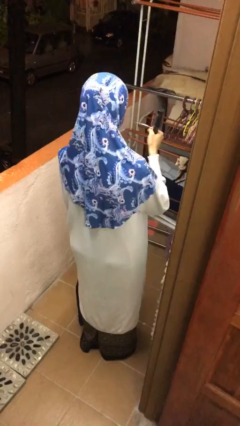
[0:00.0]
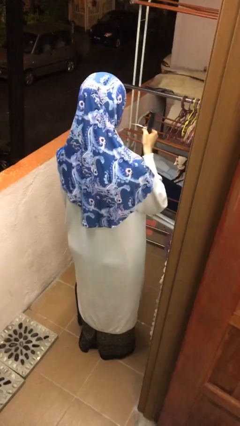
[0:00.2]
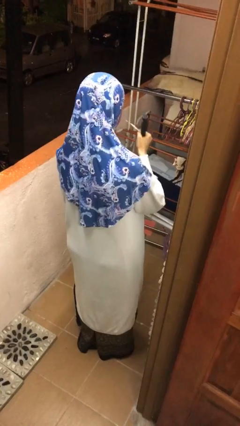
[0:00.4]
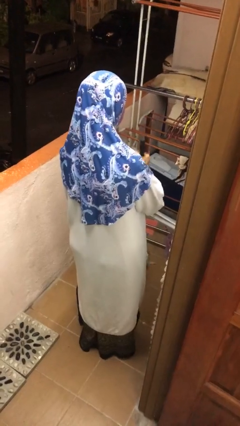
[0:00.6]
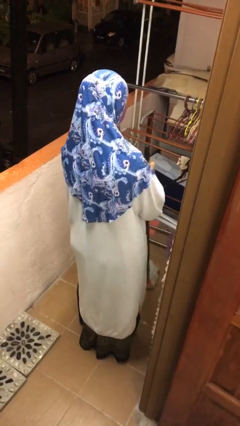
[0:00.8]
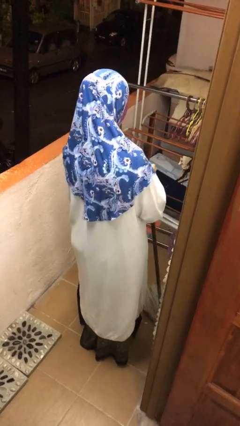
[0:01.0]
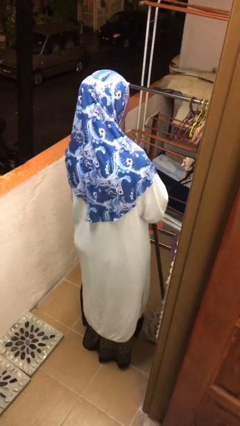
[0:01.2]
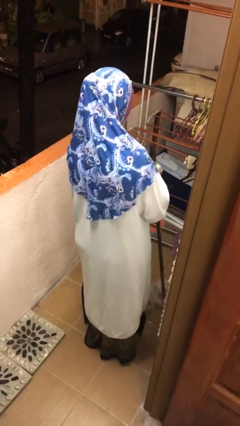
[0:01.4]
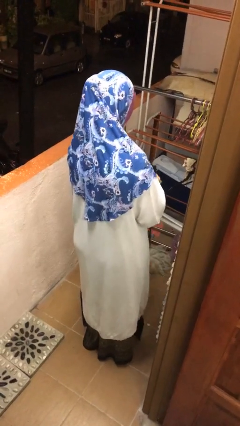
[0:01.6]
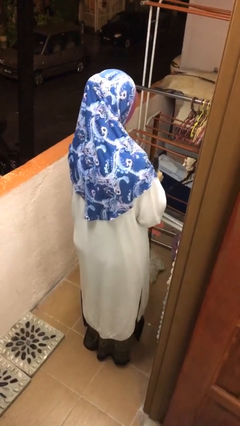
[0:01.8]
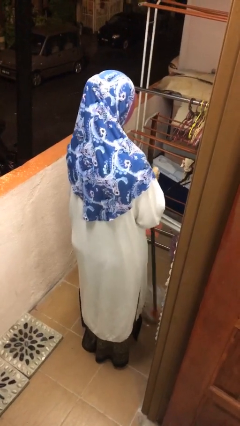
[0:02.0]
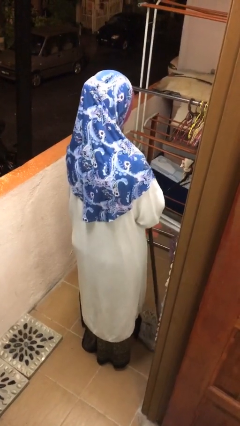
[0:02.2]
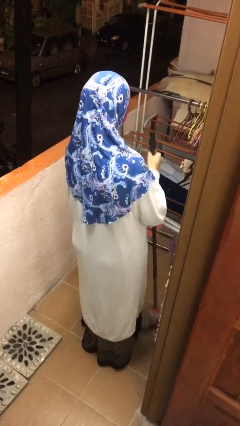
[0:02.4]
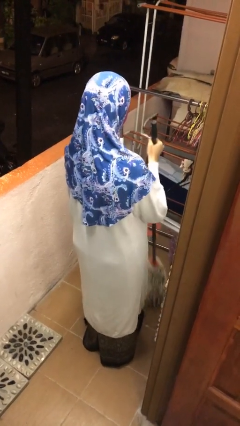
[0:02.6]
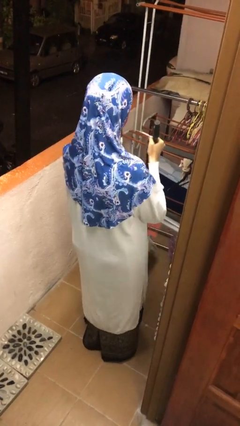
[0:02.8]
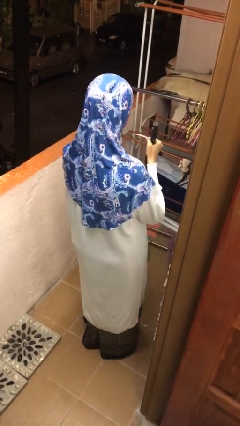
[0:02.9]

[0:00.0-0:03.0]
person mops

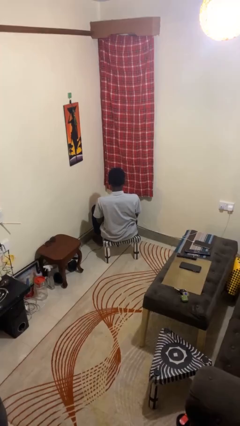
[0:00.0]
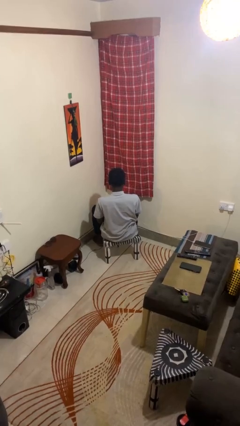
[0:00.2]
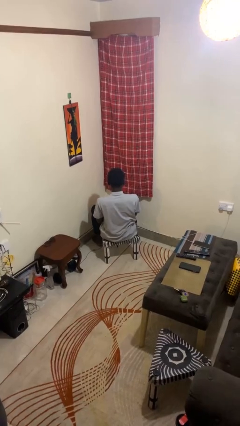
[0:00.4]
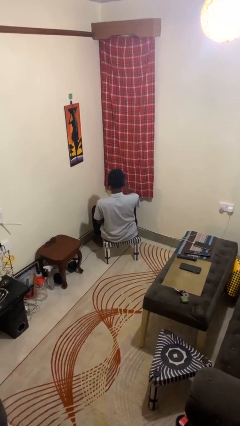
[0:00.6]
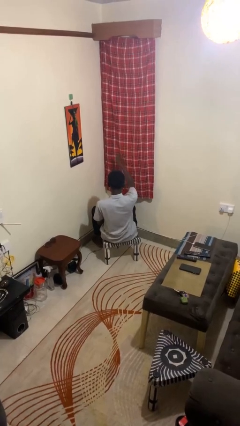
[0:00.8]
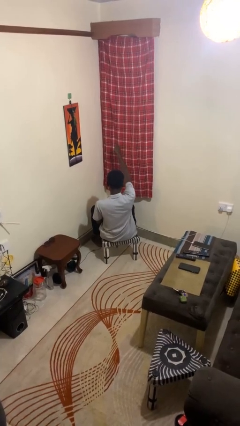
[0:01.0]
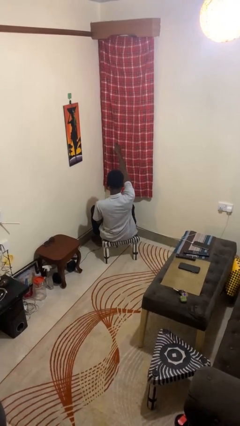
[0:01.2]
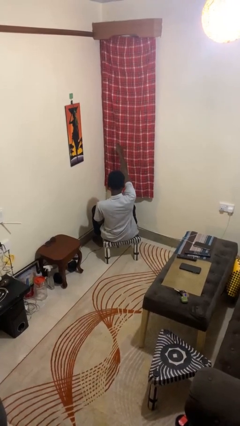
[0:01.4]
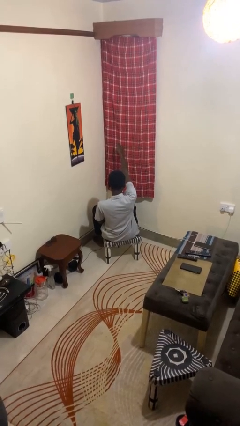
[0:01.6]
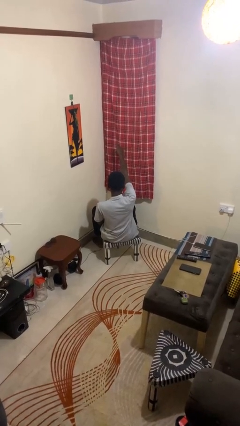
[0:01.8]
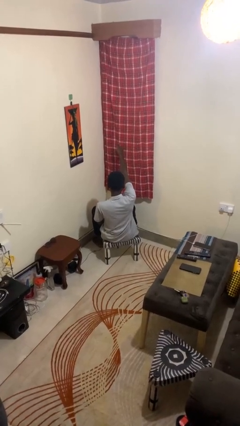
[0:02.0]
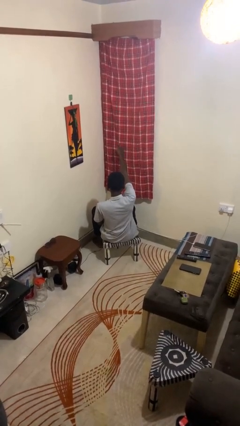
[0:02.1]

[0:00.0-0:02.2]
person gestures thumbs up

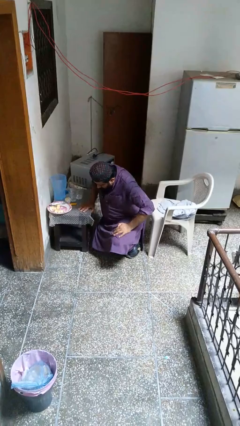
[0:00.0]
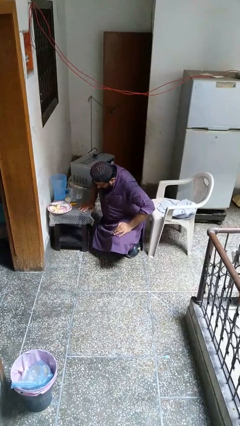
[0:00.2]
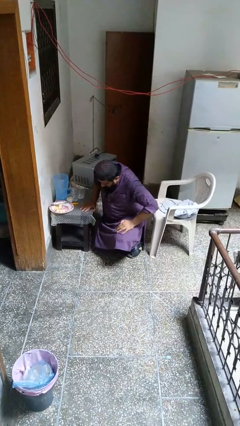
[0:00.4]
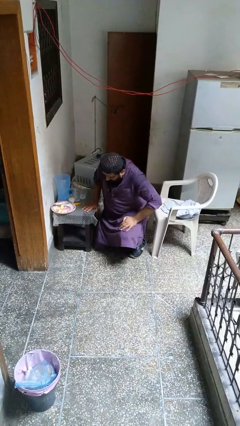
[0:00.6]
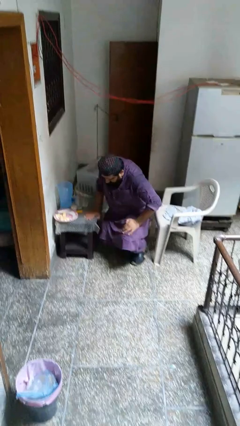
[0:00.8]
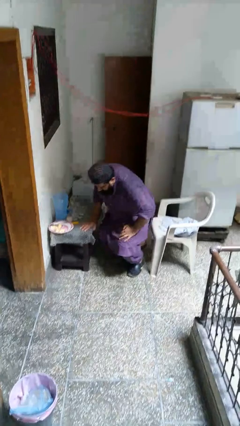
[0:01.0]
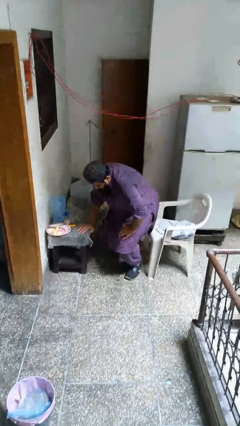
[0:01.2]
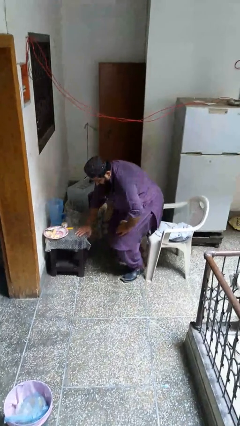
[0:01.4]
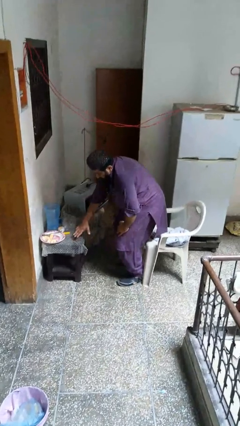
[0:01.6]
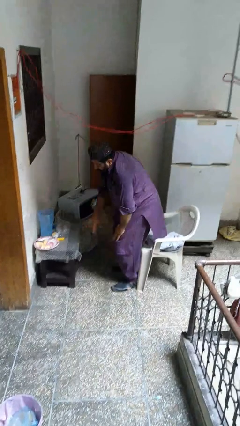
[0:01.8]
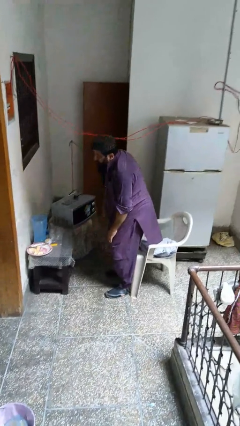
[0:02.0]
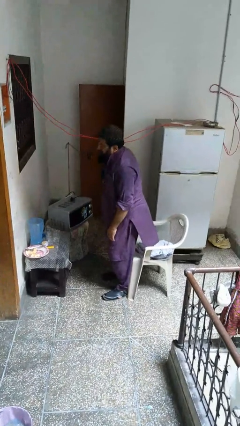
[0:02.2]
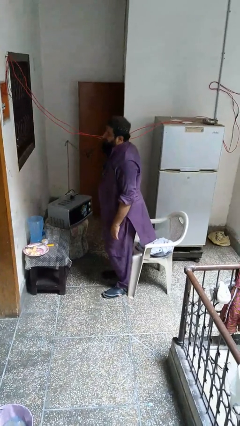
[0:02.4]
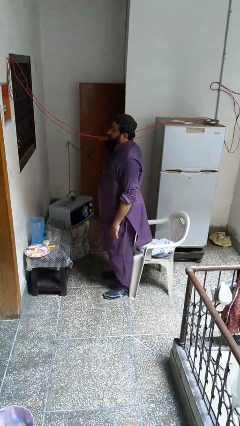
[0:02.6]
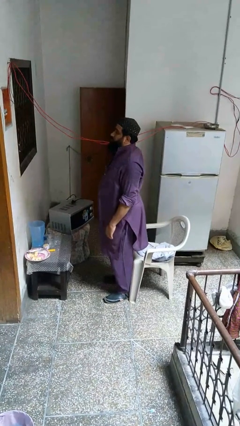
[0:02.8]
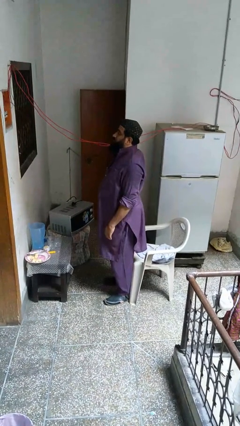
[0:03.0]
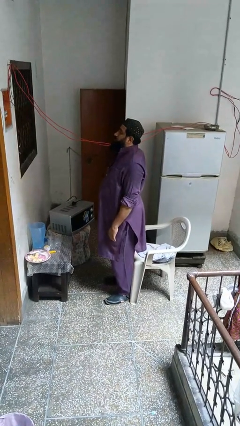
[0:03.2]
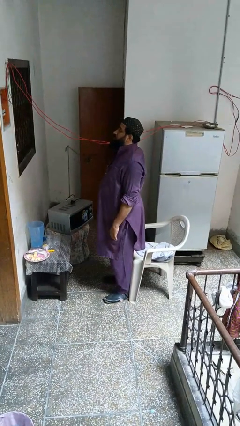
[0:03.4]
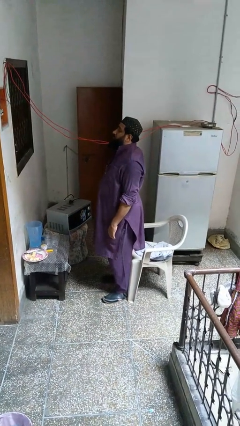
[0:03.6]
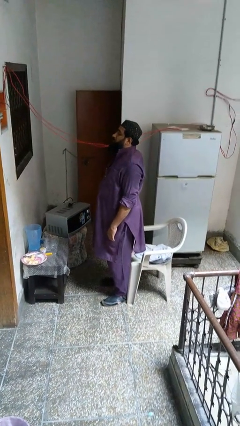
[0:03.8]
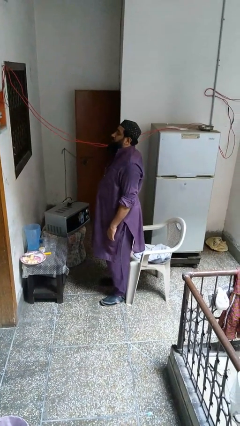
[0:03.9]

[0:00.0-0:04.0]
person stands up from floor

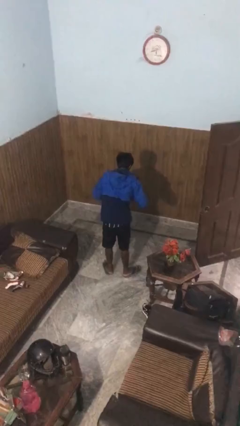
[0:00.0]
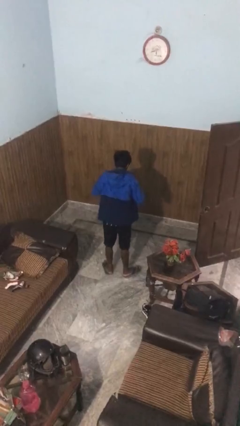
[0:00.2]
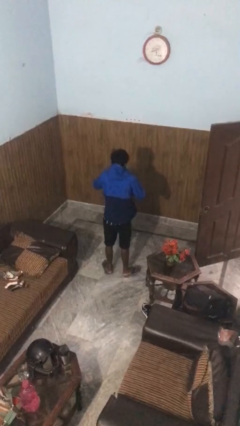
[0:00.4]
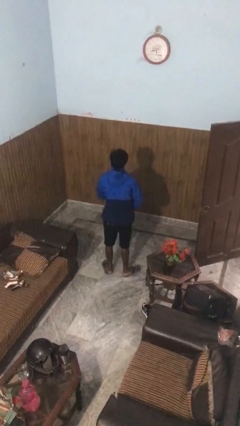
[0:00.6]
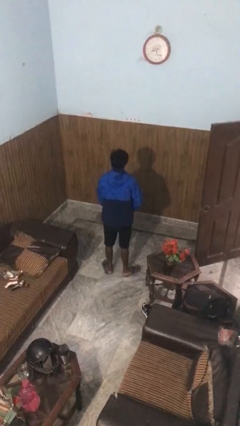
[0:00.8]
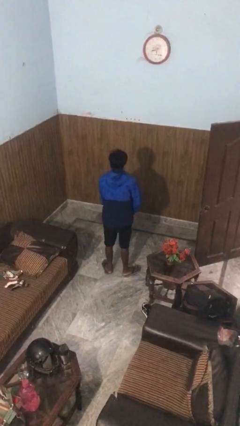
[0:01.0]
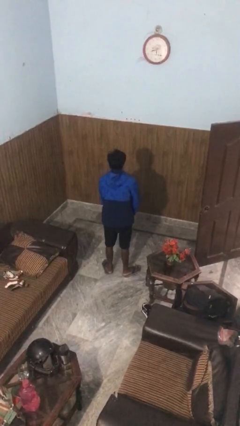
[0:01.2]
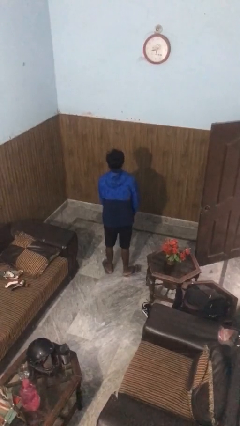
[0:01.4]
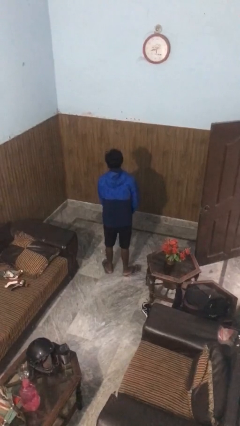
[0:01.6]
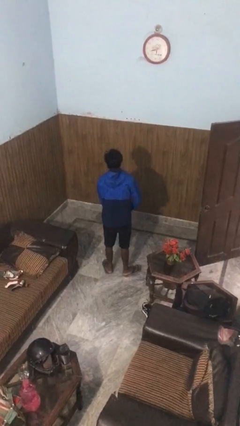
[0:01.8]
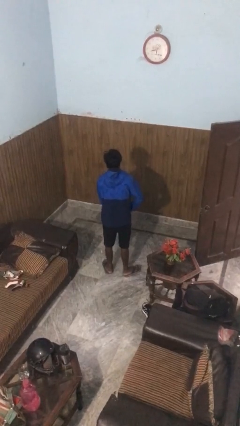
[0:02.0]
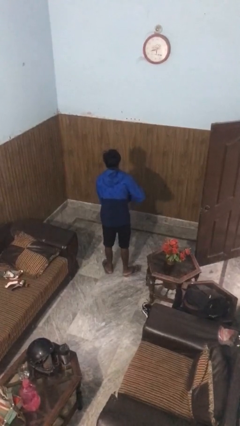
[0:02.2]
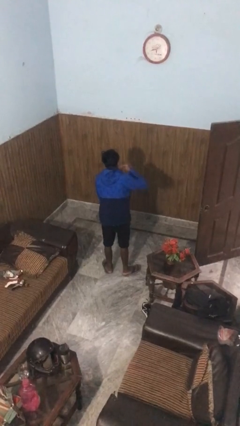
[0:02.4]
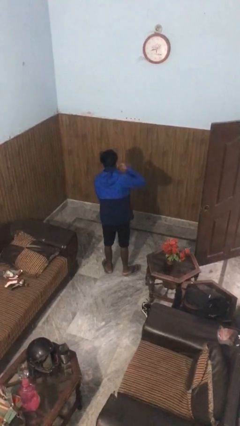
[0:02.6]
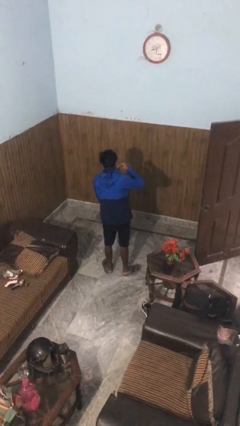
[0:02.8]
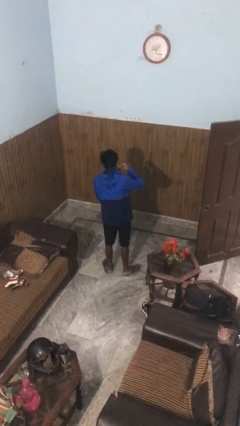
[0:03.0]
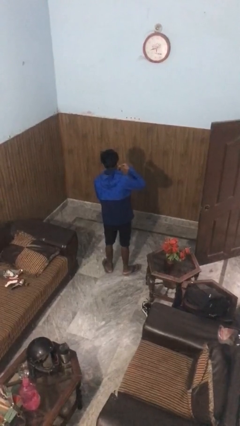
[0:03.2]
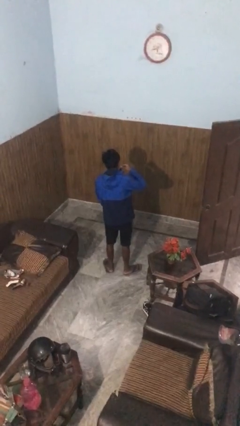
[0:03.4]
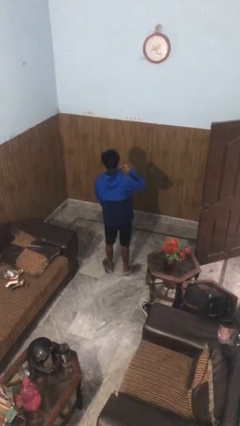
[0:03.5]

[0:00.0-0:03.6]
person zips up jacket

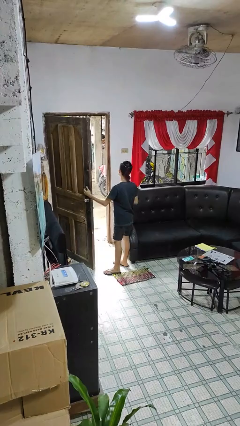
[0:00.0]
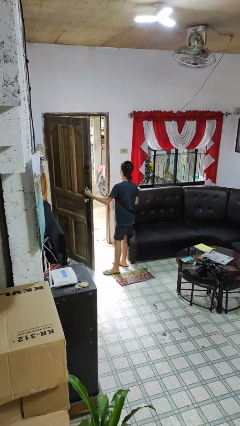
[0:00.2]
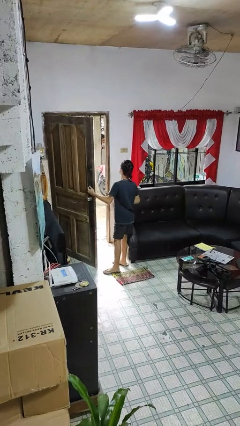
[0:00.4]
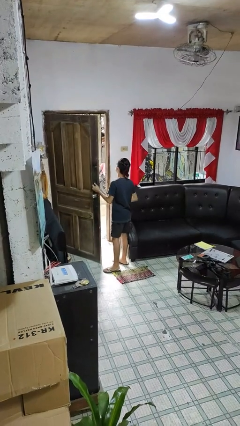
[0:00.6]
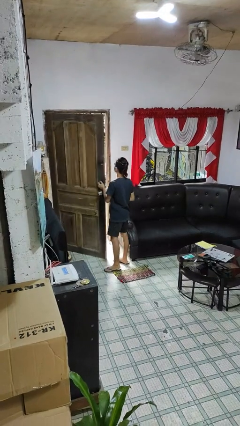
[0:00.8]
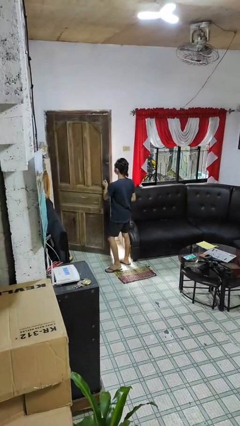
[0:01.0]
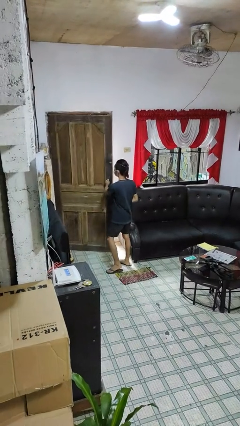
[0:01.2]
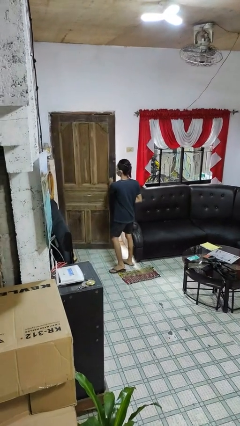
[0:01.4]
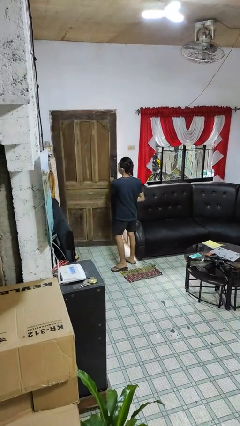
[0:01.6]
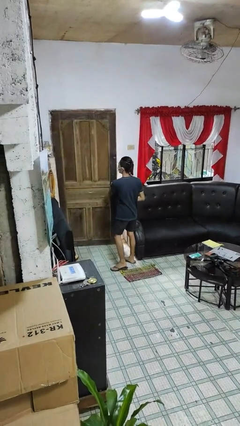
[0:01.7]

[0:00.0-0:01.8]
person closes facility door

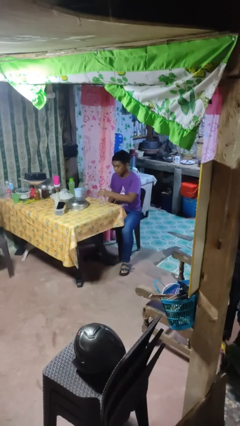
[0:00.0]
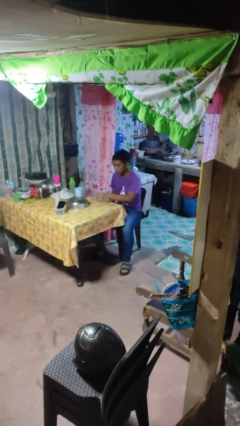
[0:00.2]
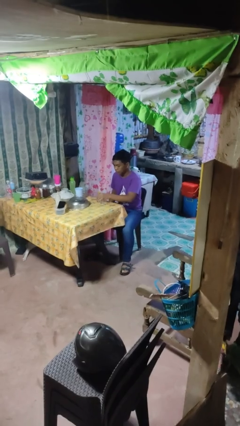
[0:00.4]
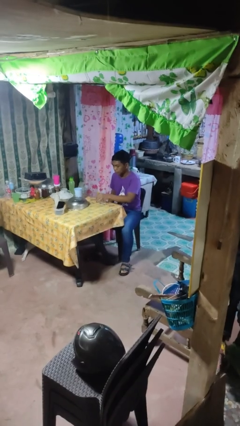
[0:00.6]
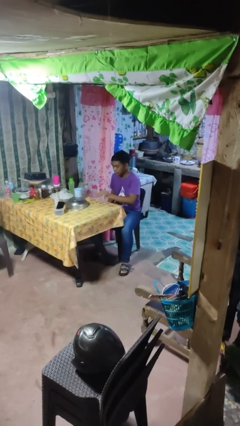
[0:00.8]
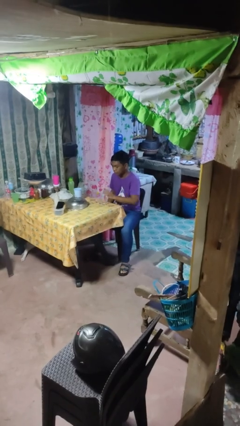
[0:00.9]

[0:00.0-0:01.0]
person puts down object on table

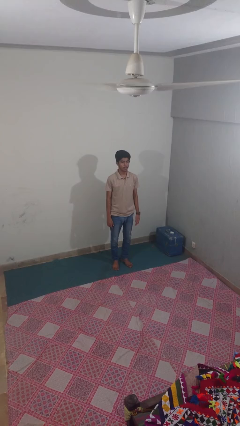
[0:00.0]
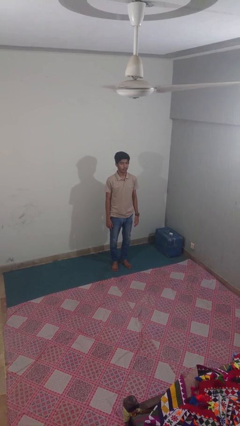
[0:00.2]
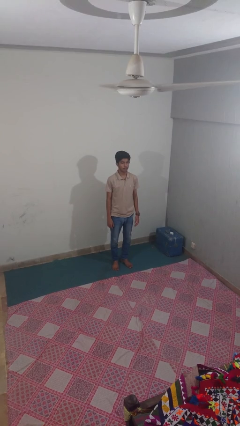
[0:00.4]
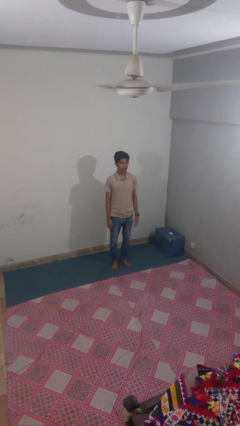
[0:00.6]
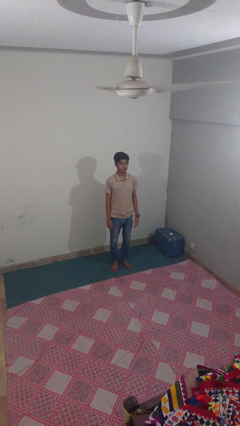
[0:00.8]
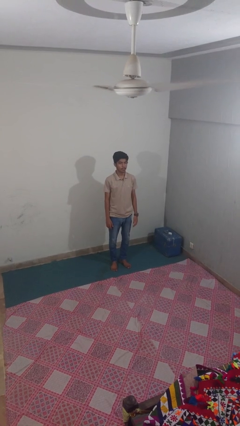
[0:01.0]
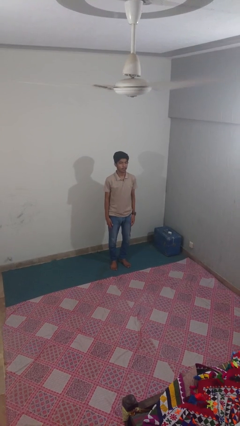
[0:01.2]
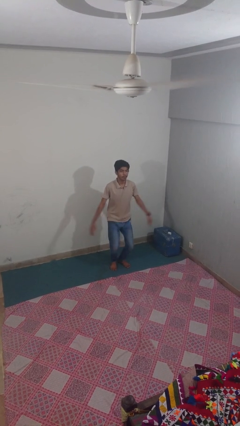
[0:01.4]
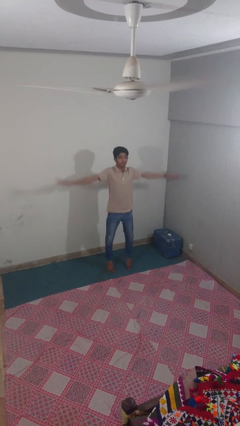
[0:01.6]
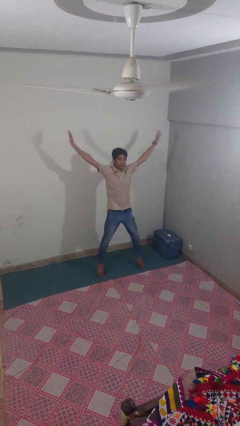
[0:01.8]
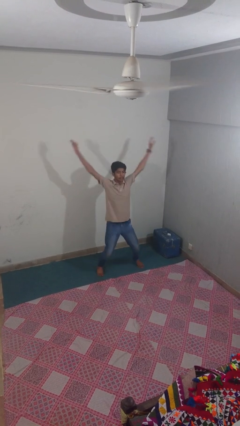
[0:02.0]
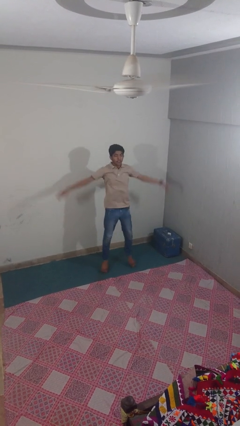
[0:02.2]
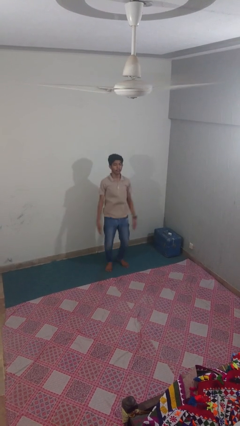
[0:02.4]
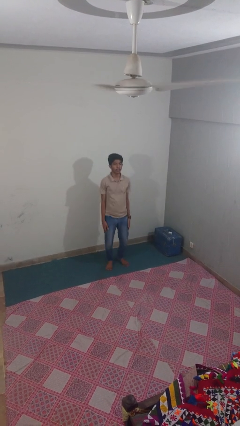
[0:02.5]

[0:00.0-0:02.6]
person exercises with jumping jacks
